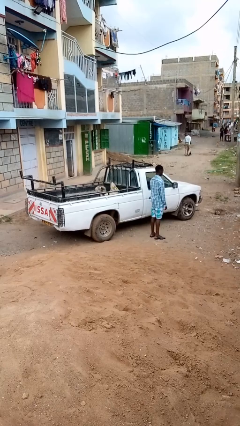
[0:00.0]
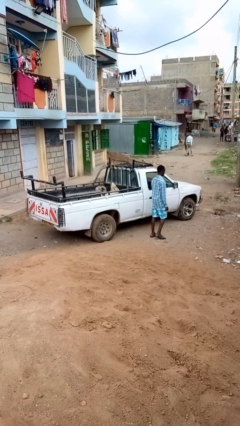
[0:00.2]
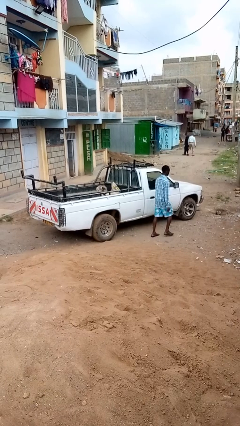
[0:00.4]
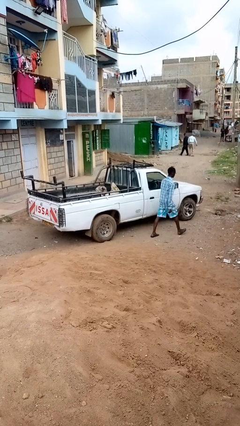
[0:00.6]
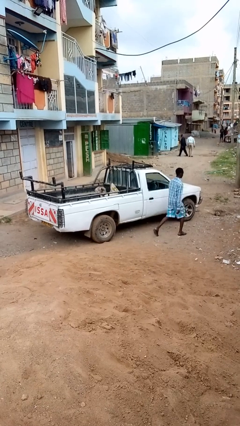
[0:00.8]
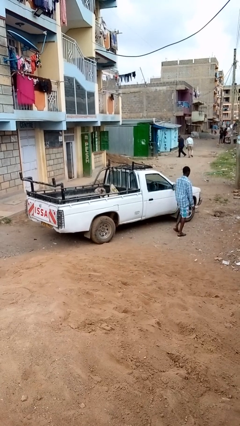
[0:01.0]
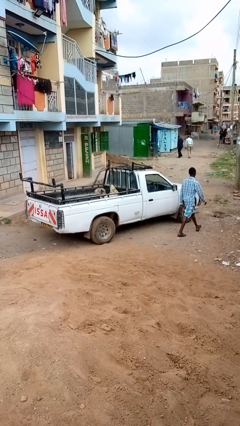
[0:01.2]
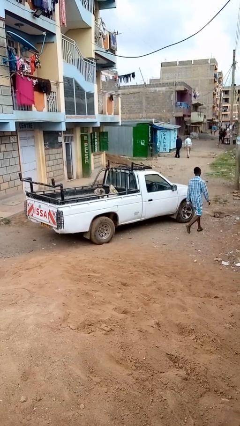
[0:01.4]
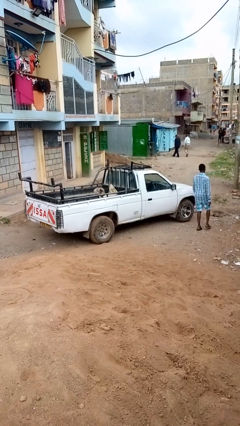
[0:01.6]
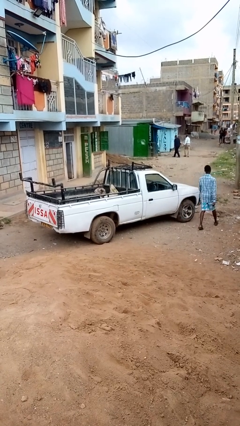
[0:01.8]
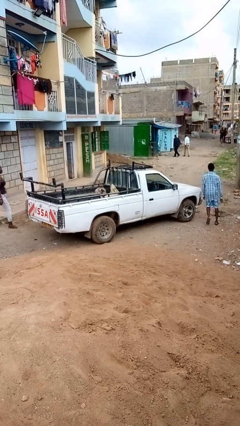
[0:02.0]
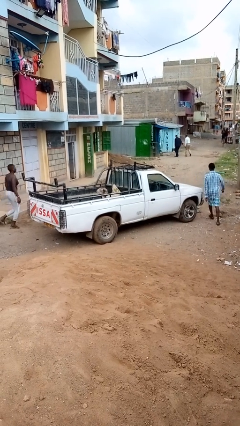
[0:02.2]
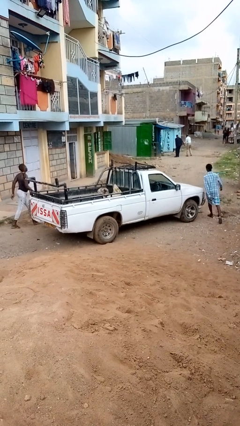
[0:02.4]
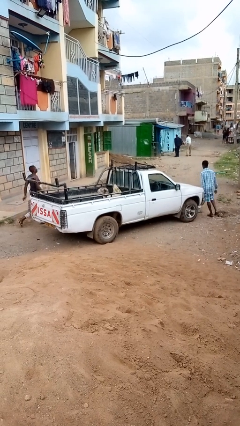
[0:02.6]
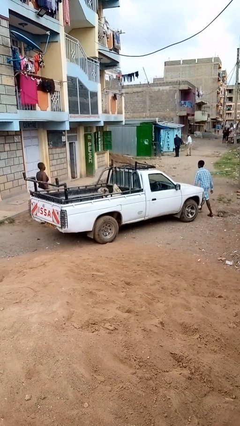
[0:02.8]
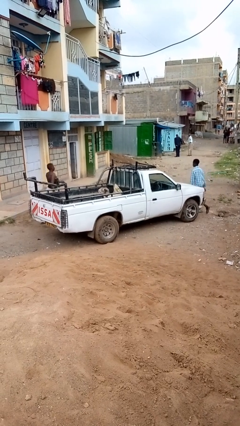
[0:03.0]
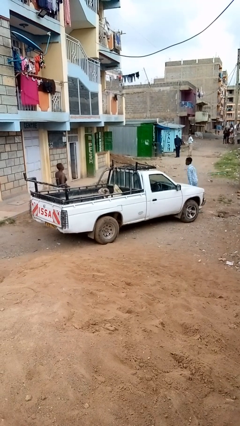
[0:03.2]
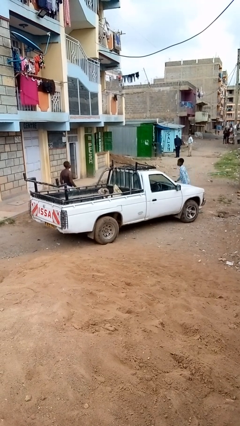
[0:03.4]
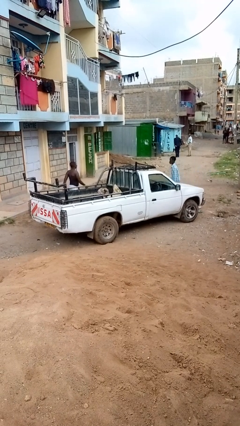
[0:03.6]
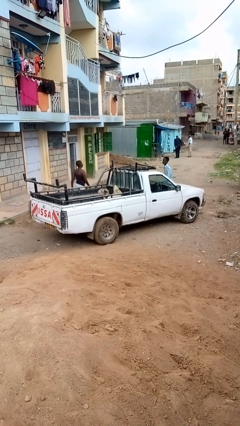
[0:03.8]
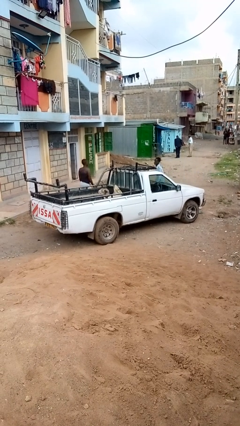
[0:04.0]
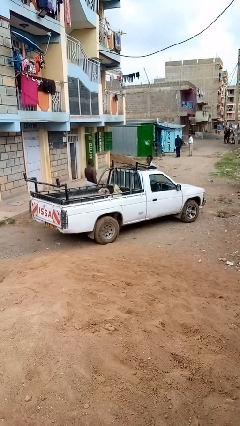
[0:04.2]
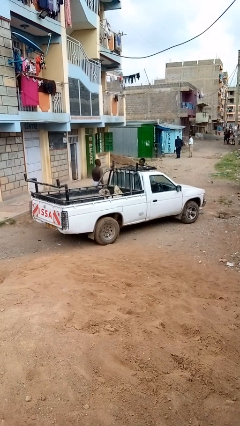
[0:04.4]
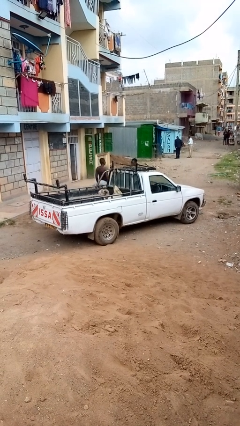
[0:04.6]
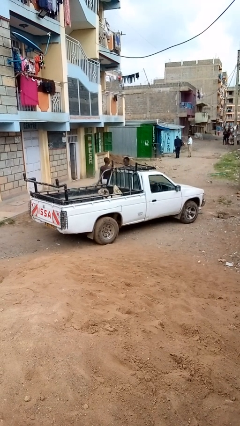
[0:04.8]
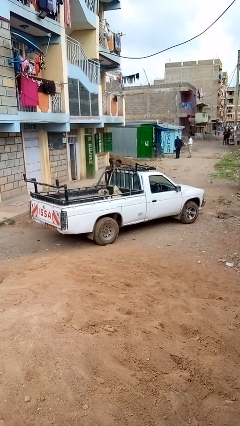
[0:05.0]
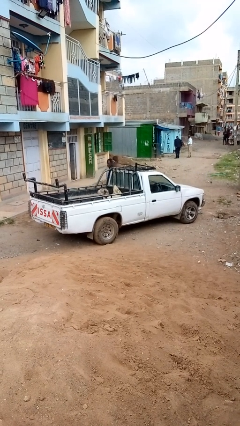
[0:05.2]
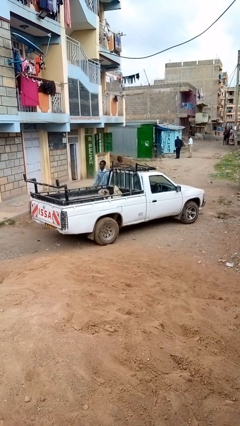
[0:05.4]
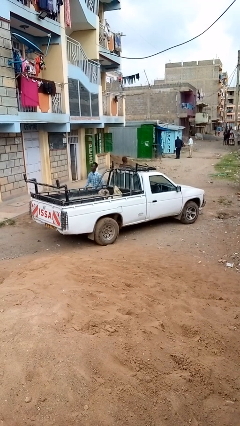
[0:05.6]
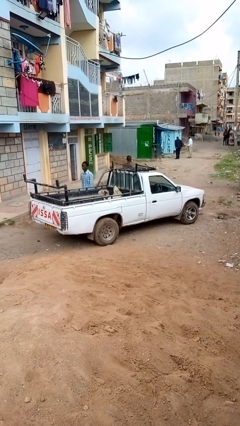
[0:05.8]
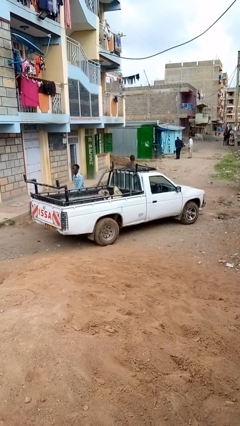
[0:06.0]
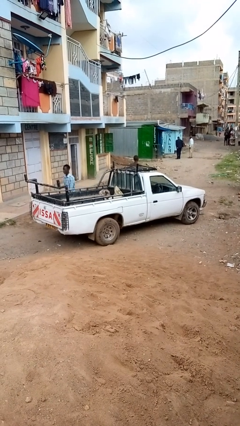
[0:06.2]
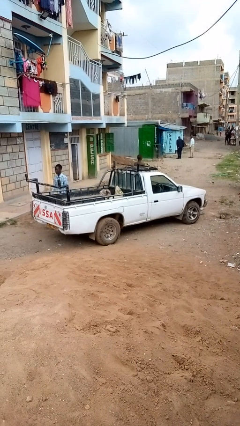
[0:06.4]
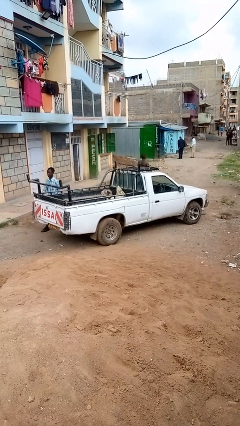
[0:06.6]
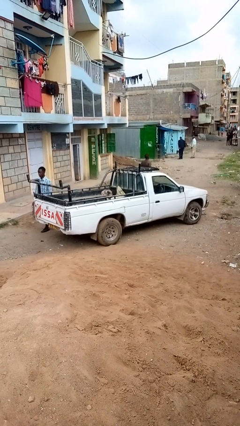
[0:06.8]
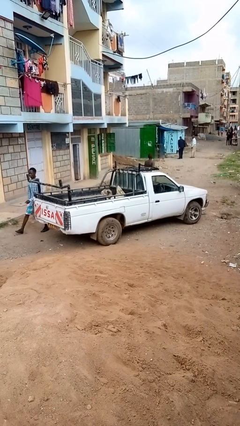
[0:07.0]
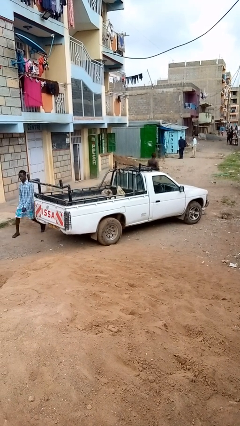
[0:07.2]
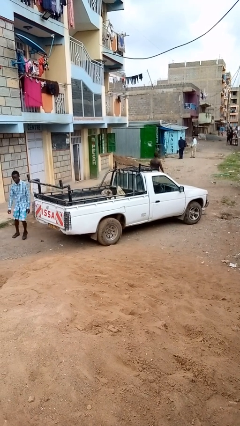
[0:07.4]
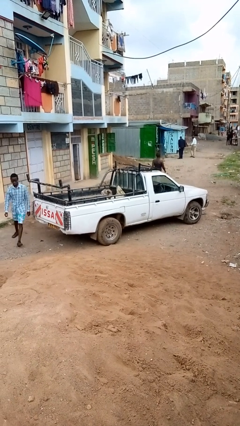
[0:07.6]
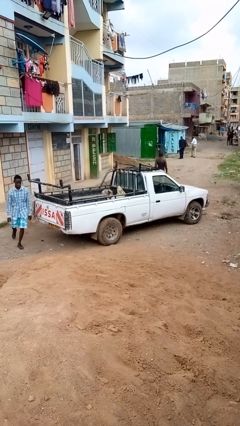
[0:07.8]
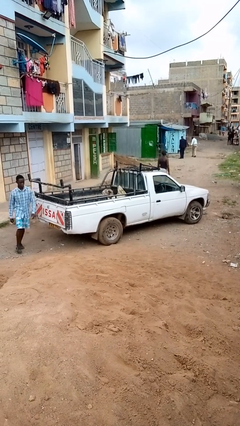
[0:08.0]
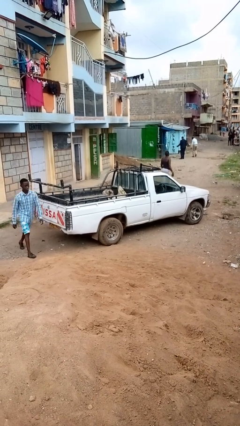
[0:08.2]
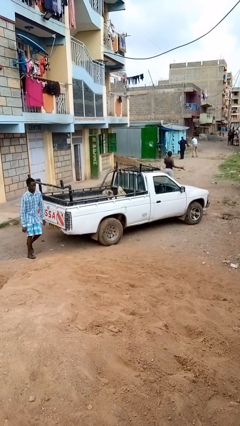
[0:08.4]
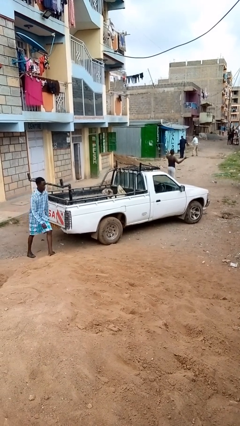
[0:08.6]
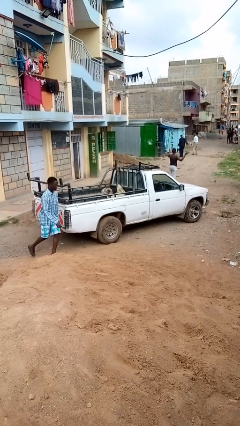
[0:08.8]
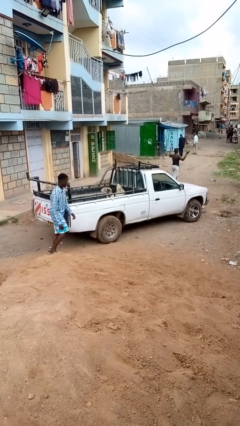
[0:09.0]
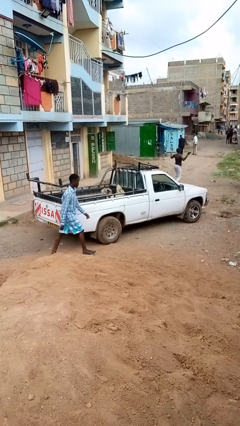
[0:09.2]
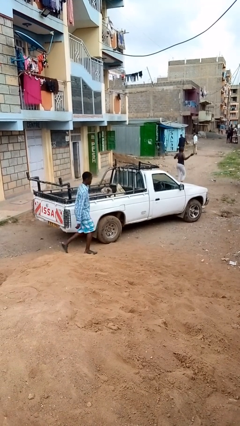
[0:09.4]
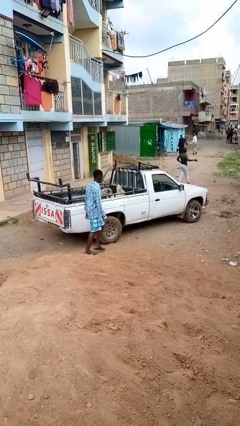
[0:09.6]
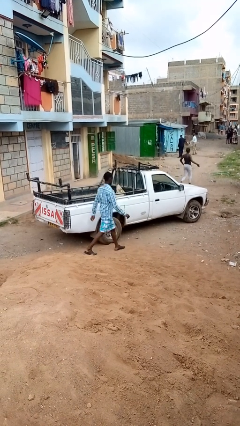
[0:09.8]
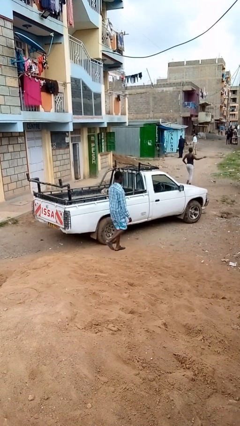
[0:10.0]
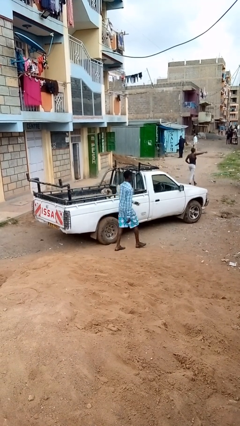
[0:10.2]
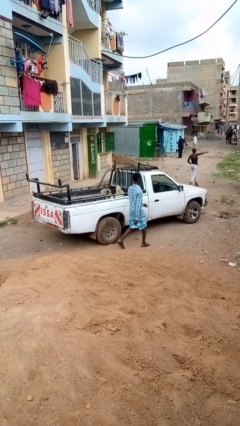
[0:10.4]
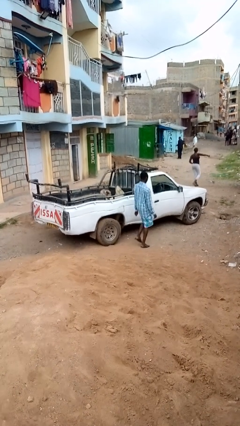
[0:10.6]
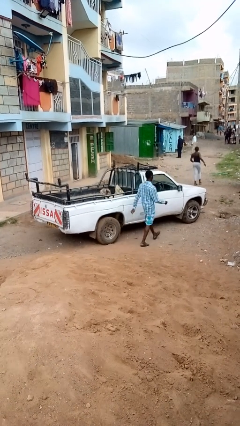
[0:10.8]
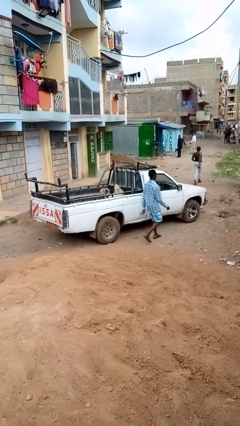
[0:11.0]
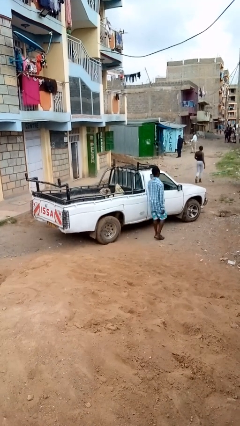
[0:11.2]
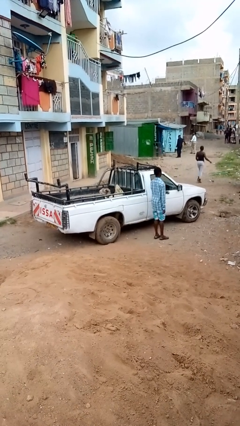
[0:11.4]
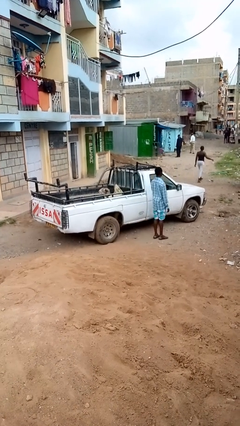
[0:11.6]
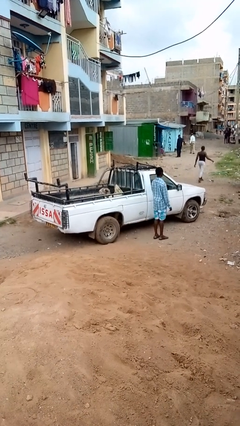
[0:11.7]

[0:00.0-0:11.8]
person walks around car

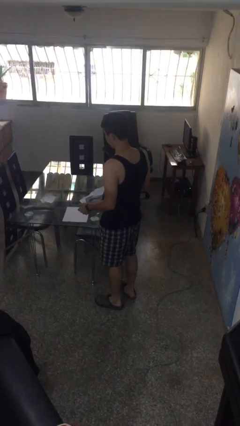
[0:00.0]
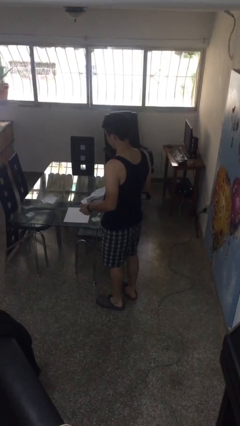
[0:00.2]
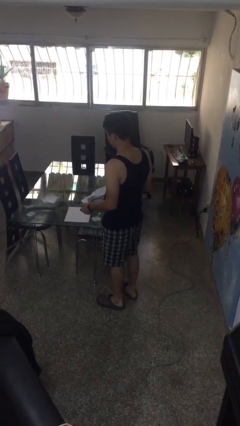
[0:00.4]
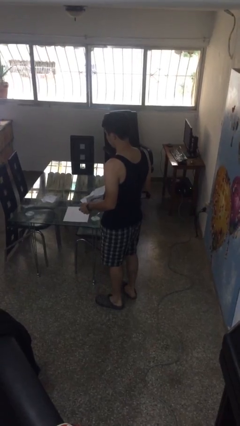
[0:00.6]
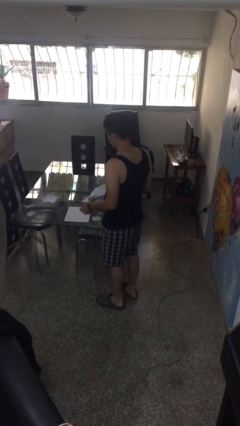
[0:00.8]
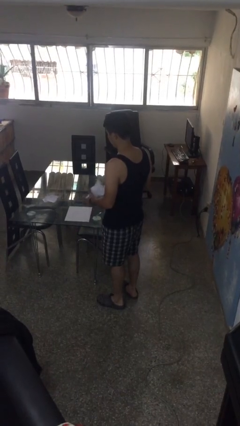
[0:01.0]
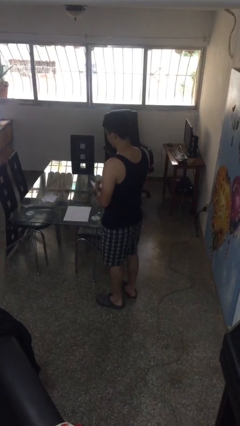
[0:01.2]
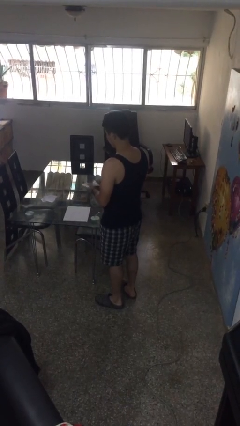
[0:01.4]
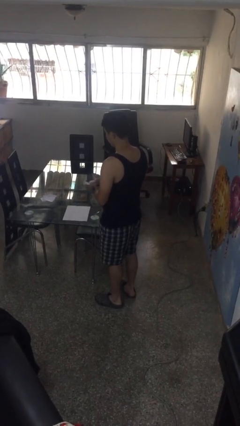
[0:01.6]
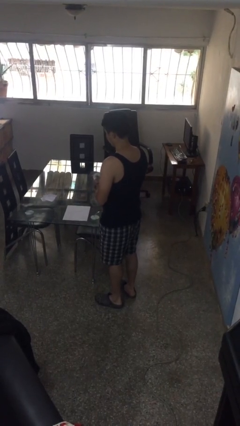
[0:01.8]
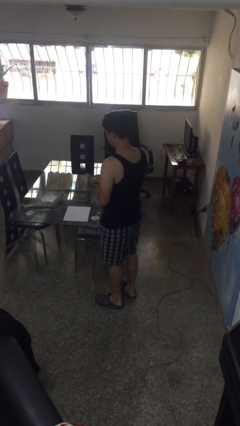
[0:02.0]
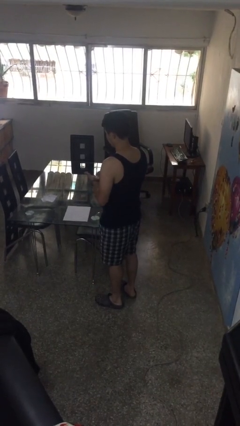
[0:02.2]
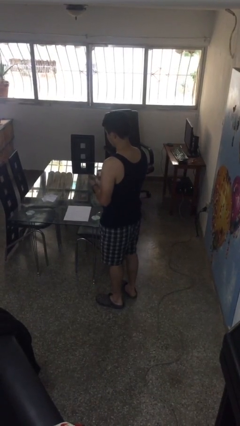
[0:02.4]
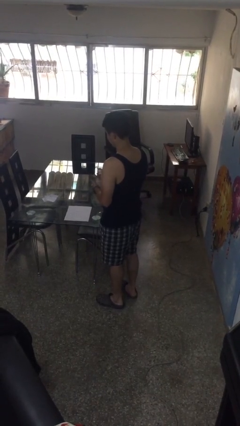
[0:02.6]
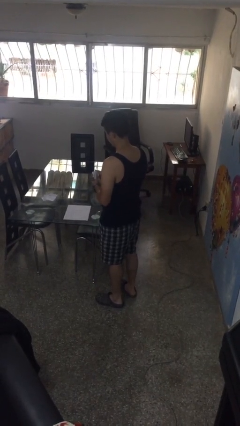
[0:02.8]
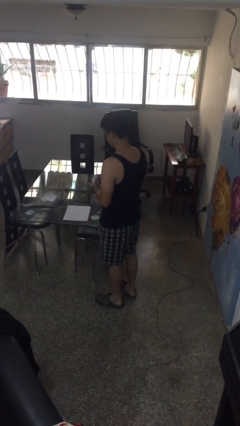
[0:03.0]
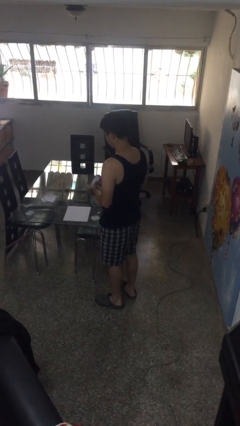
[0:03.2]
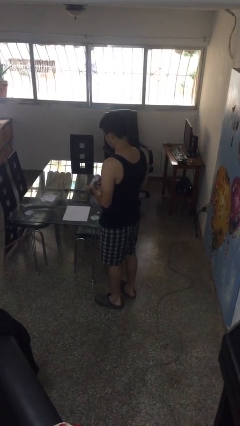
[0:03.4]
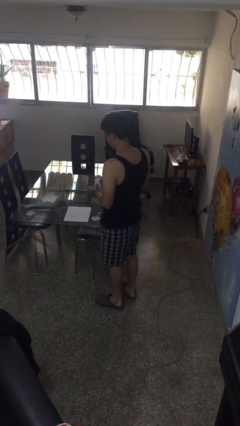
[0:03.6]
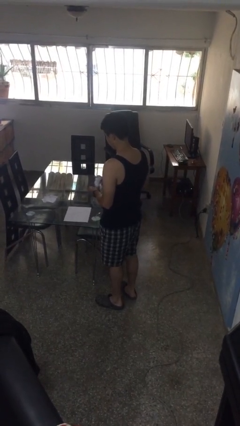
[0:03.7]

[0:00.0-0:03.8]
person crumples paper

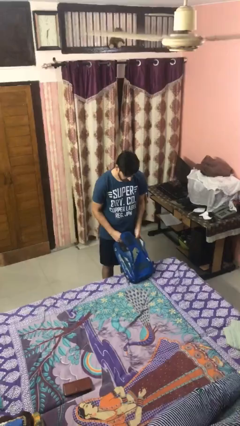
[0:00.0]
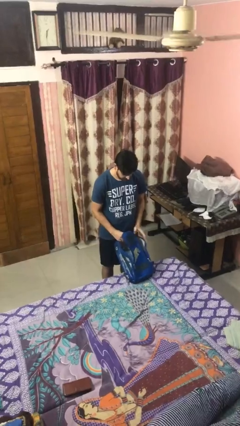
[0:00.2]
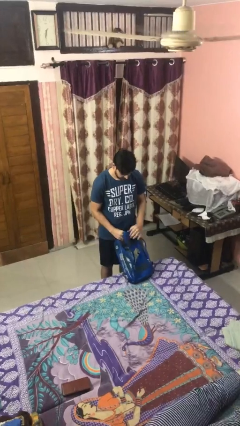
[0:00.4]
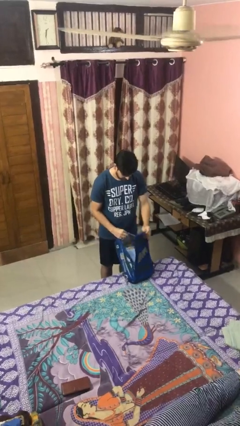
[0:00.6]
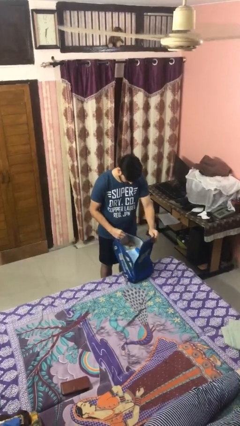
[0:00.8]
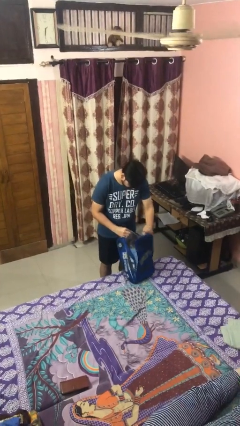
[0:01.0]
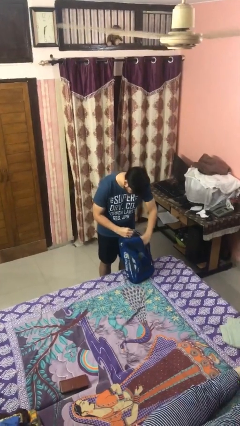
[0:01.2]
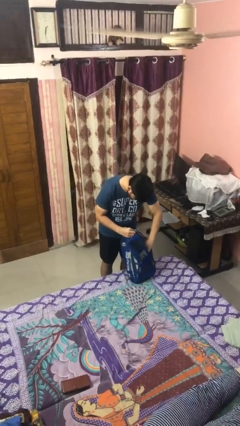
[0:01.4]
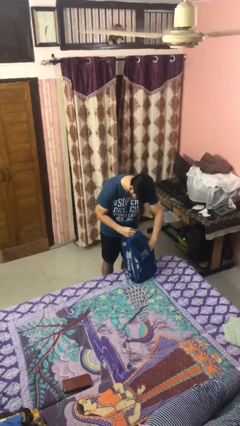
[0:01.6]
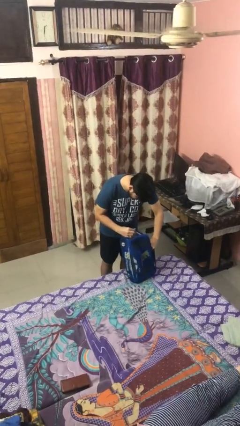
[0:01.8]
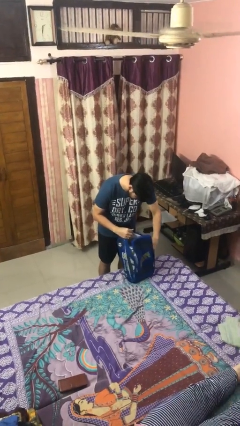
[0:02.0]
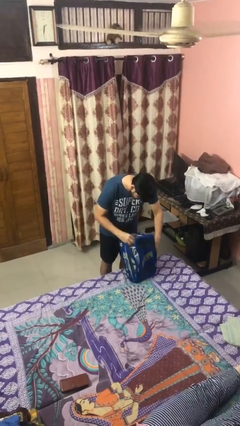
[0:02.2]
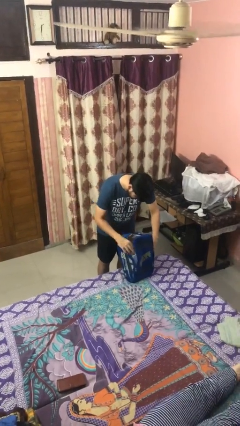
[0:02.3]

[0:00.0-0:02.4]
person searches in purse
